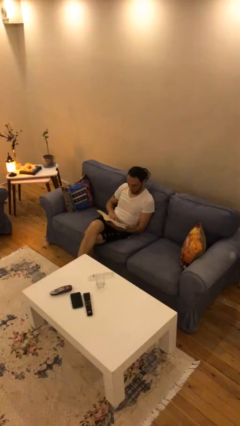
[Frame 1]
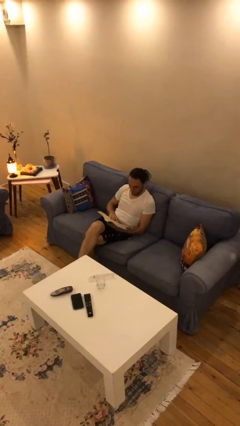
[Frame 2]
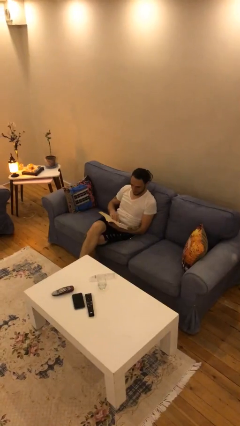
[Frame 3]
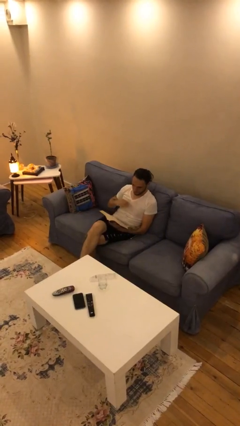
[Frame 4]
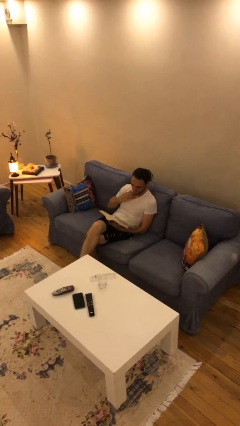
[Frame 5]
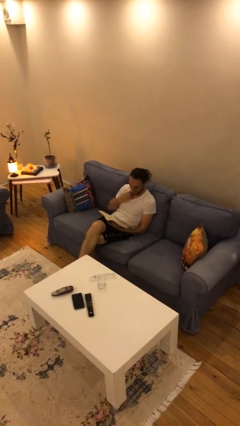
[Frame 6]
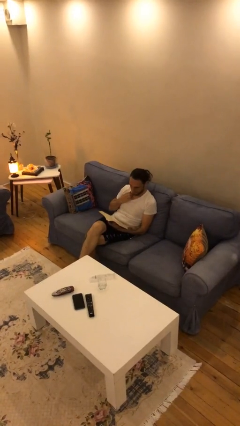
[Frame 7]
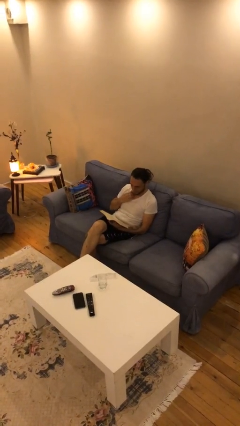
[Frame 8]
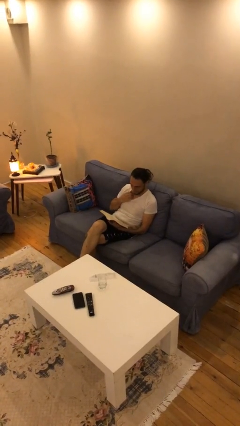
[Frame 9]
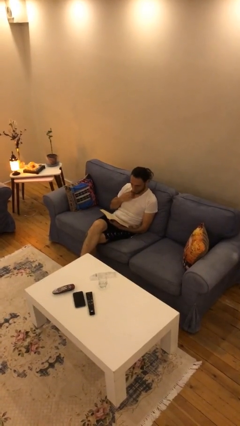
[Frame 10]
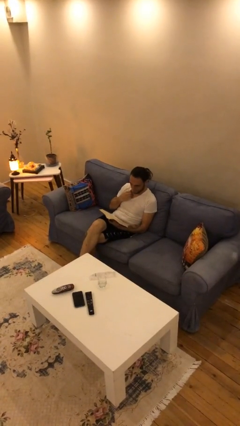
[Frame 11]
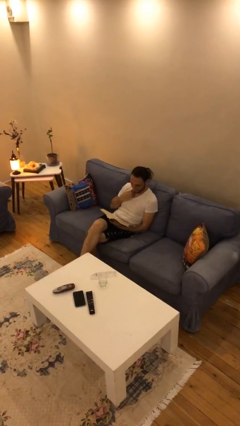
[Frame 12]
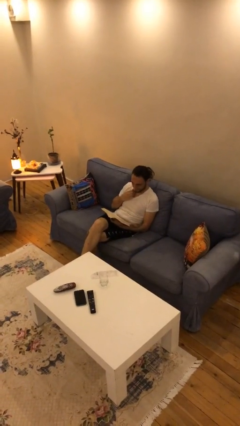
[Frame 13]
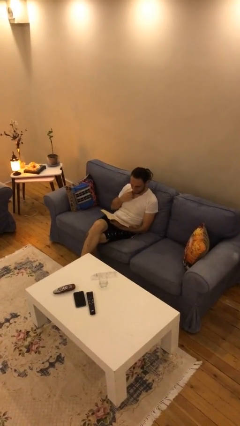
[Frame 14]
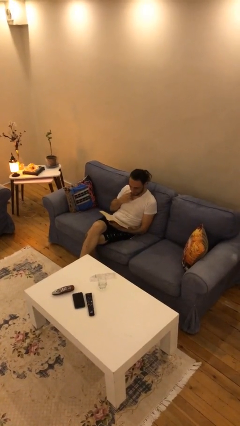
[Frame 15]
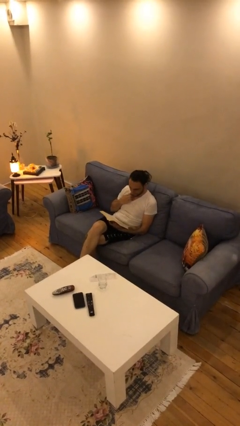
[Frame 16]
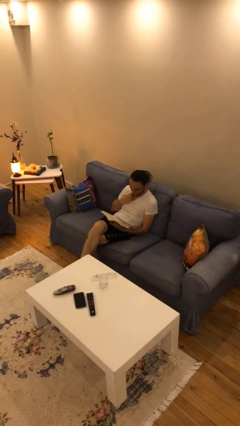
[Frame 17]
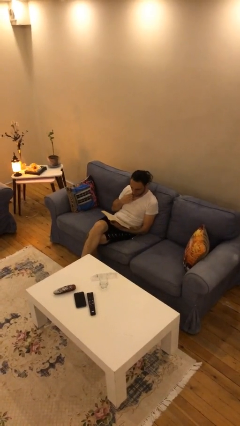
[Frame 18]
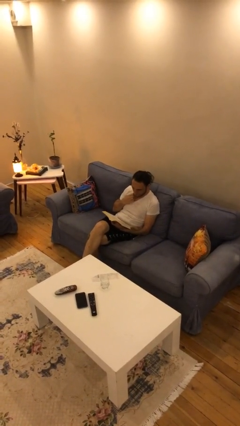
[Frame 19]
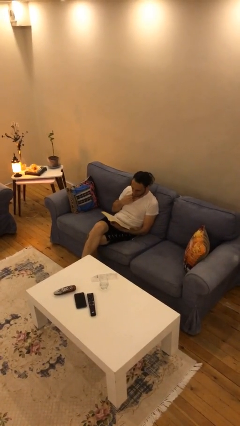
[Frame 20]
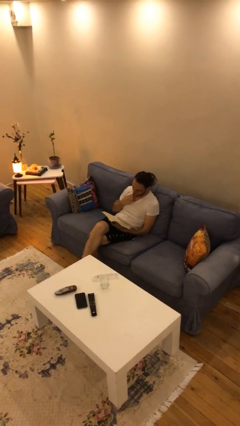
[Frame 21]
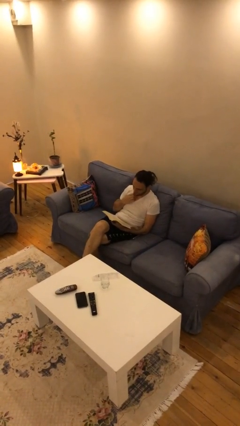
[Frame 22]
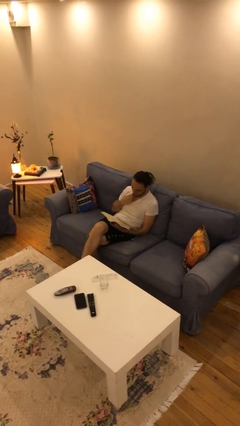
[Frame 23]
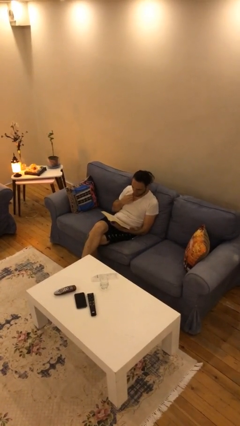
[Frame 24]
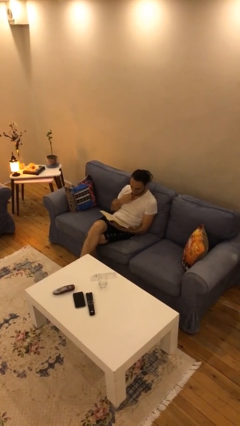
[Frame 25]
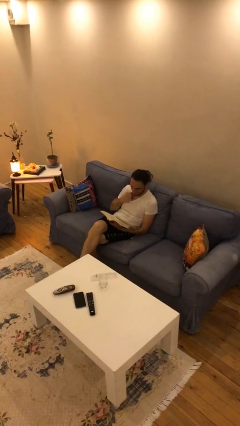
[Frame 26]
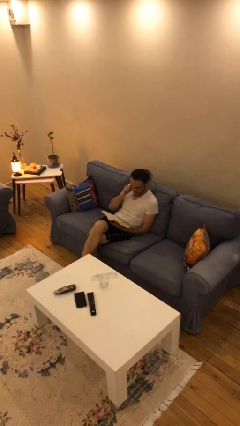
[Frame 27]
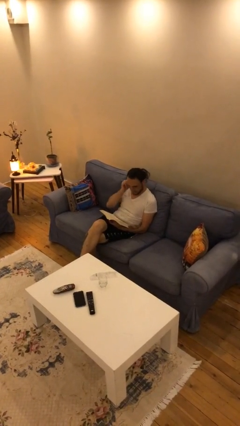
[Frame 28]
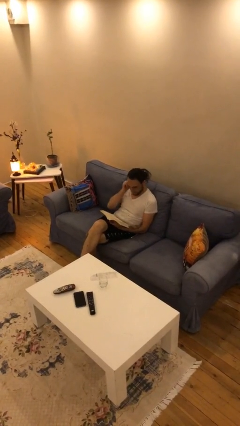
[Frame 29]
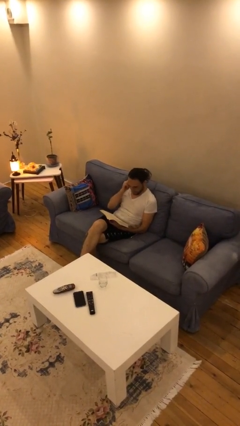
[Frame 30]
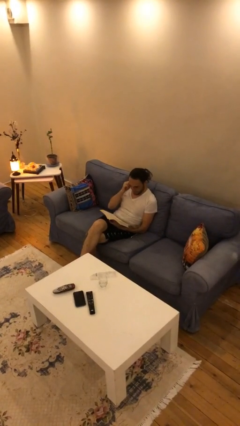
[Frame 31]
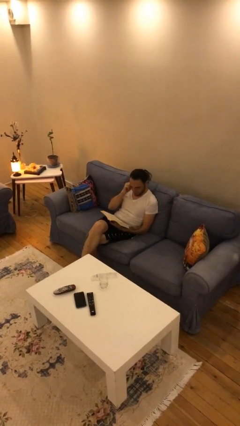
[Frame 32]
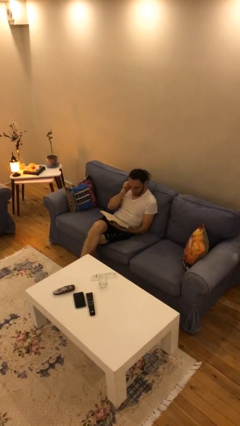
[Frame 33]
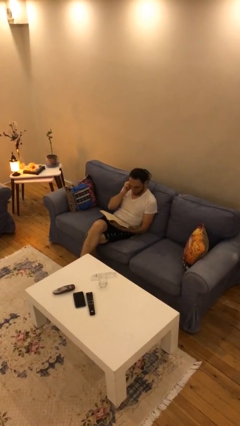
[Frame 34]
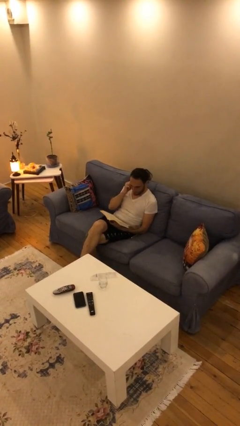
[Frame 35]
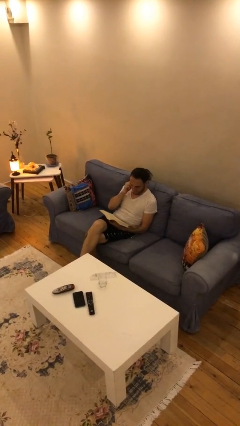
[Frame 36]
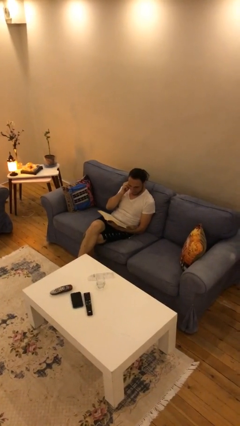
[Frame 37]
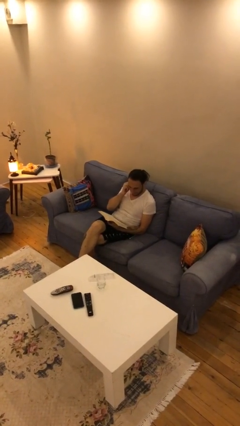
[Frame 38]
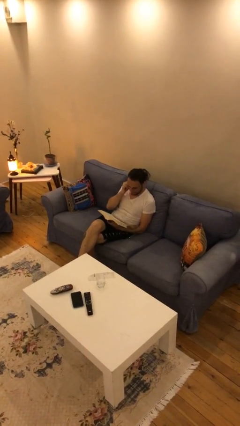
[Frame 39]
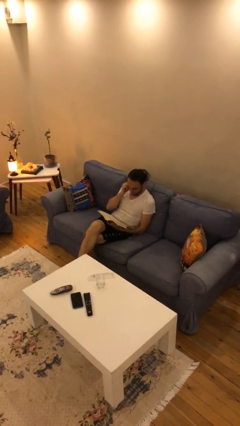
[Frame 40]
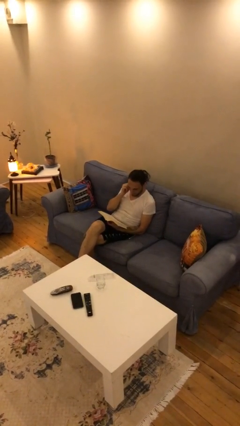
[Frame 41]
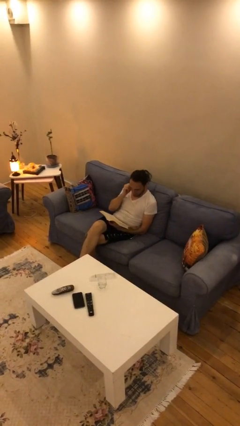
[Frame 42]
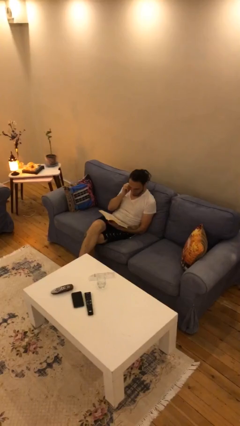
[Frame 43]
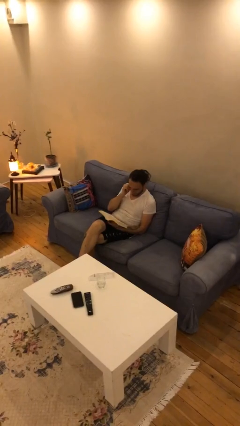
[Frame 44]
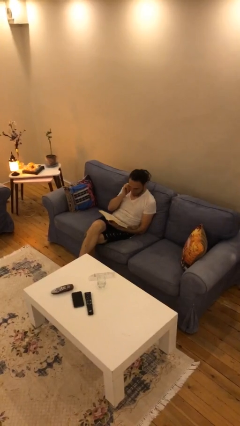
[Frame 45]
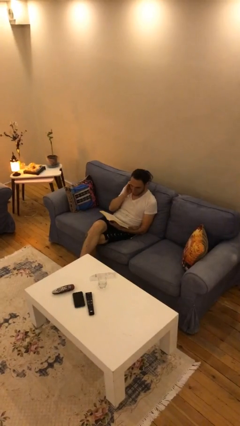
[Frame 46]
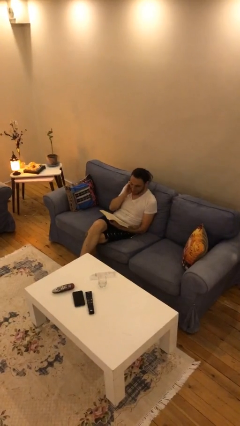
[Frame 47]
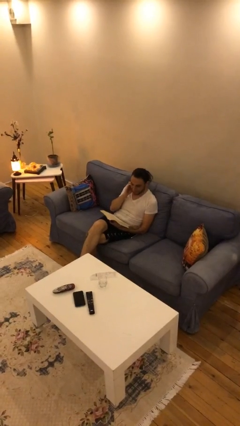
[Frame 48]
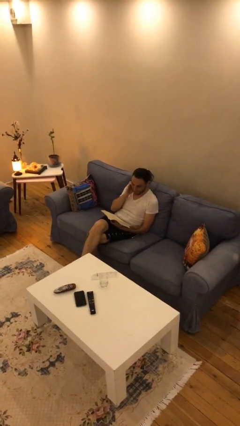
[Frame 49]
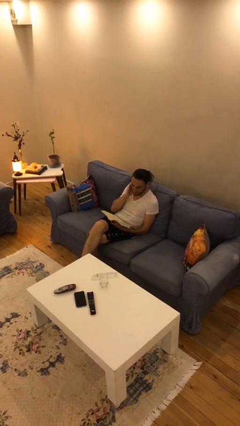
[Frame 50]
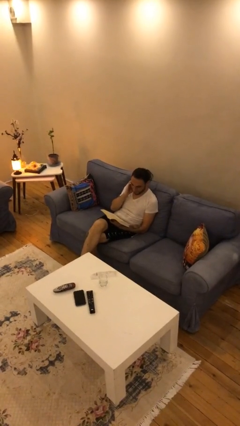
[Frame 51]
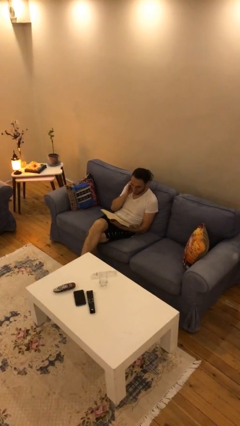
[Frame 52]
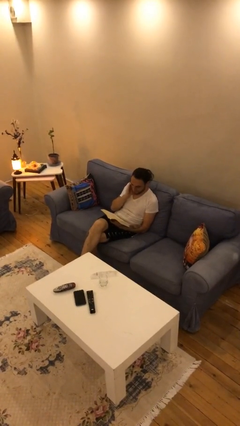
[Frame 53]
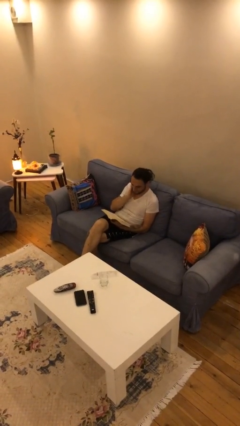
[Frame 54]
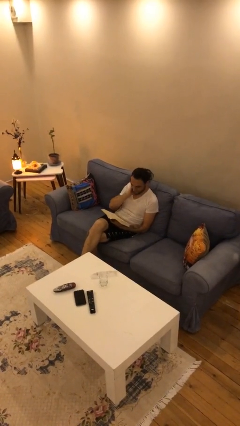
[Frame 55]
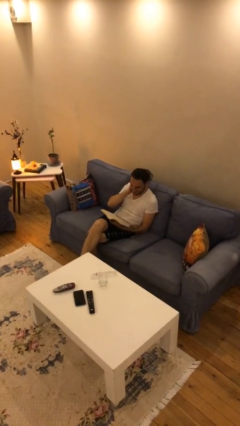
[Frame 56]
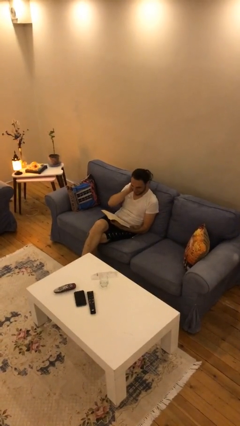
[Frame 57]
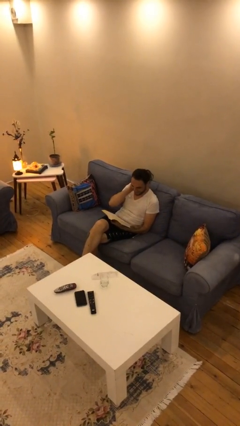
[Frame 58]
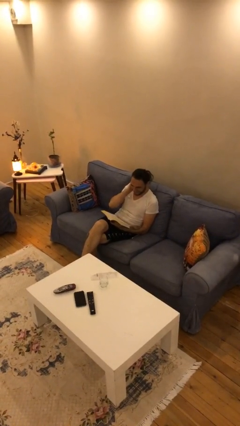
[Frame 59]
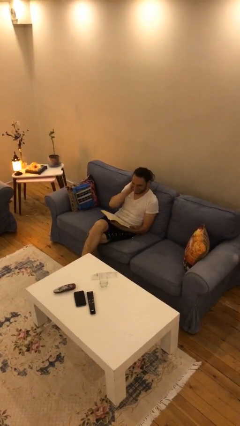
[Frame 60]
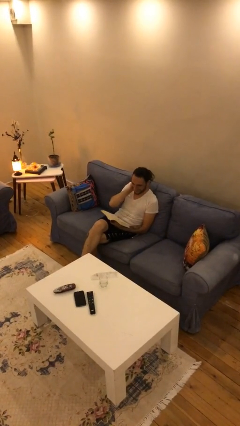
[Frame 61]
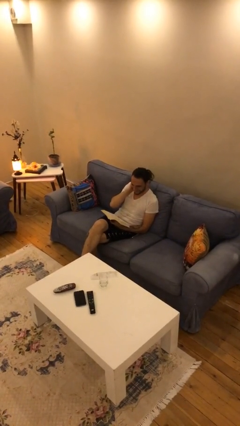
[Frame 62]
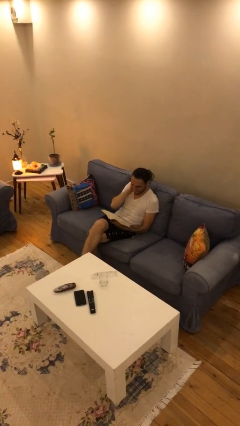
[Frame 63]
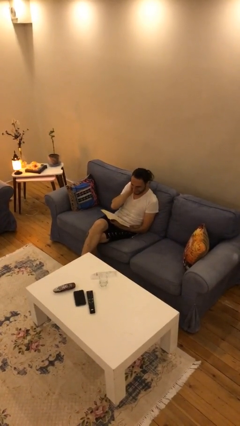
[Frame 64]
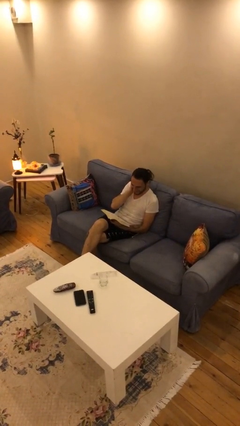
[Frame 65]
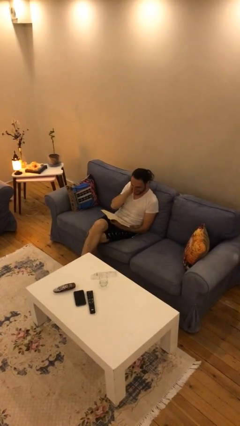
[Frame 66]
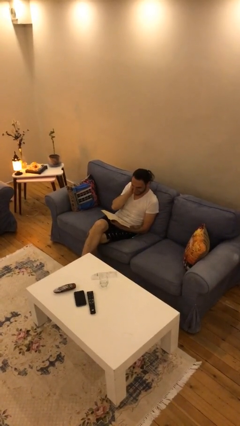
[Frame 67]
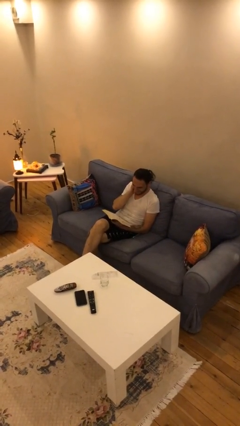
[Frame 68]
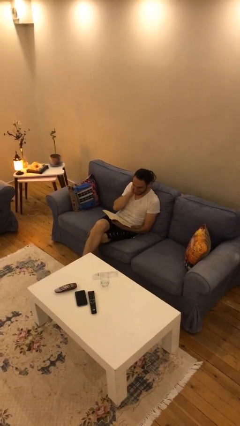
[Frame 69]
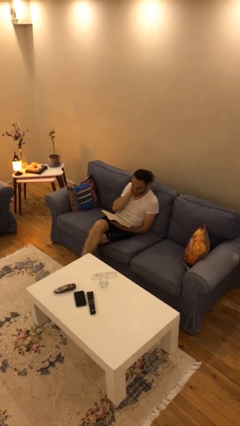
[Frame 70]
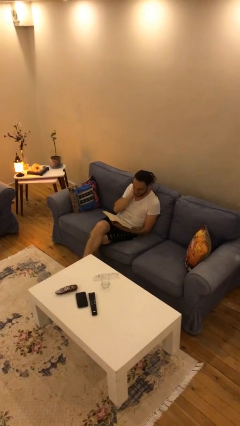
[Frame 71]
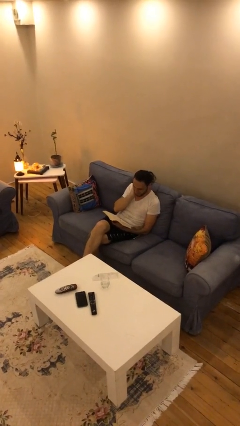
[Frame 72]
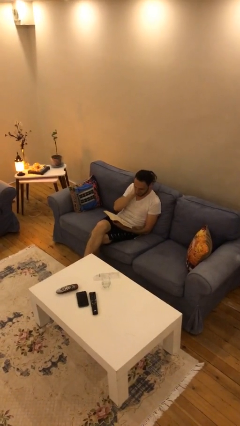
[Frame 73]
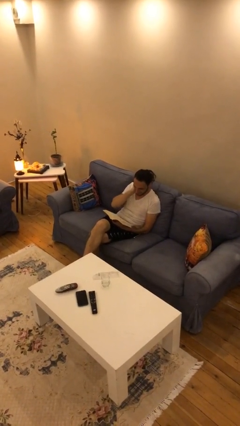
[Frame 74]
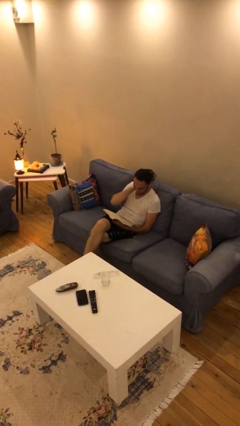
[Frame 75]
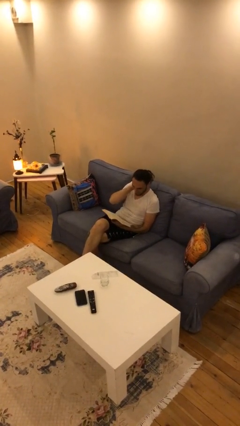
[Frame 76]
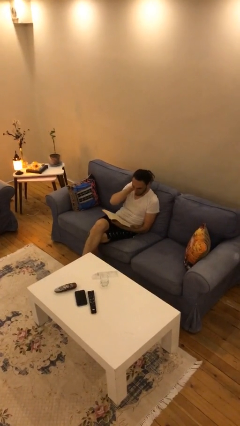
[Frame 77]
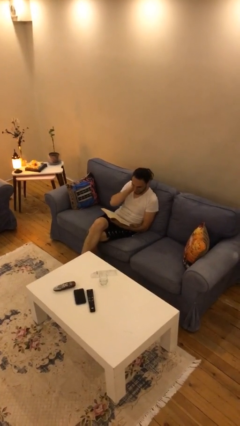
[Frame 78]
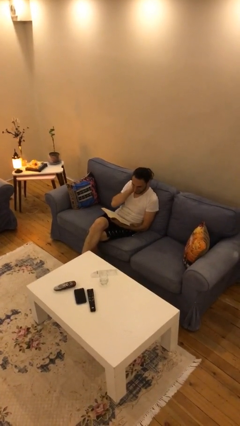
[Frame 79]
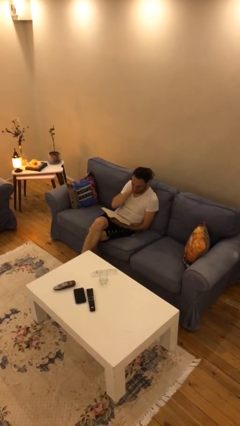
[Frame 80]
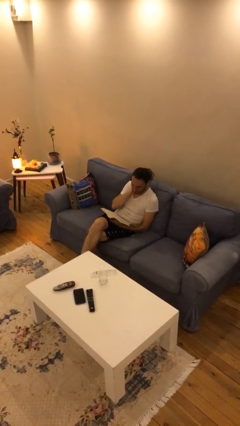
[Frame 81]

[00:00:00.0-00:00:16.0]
person reads document

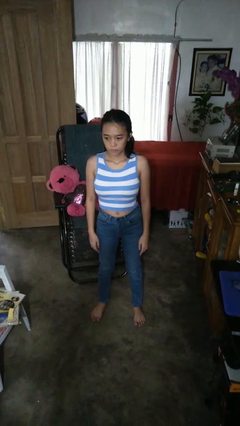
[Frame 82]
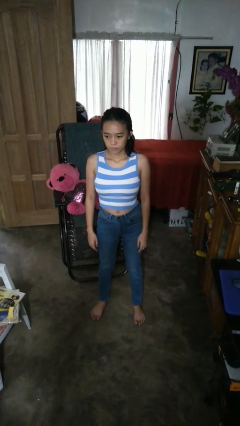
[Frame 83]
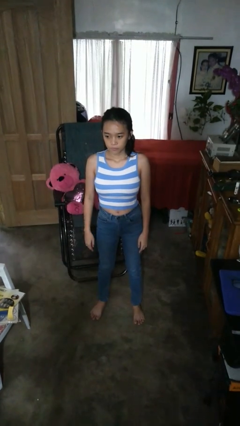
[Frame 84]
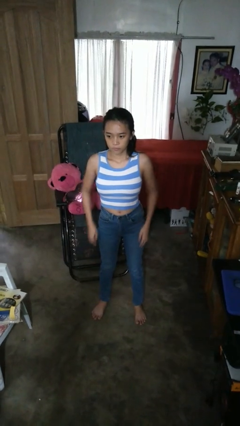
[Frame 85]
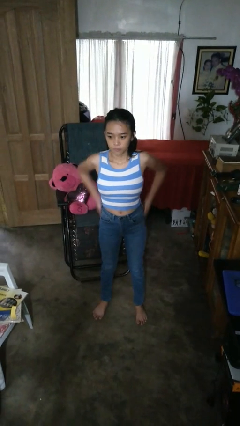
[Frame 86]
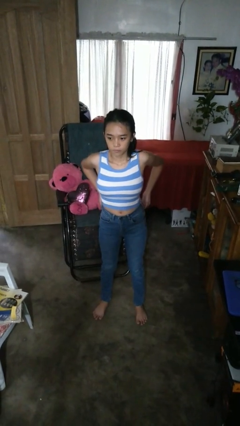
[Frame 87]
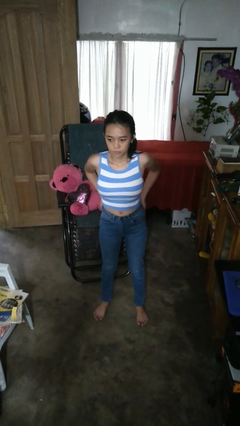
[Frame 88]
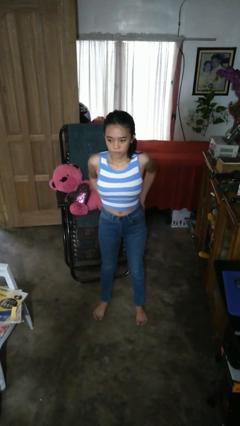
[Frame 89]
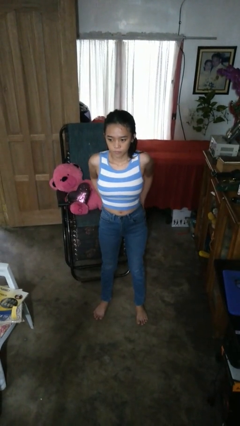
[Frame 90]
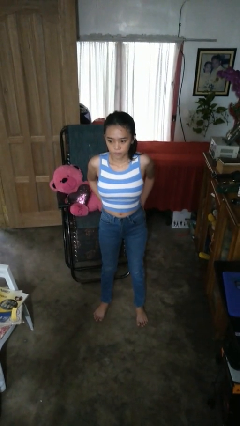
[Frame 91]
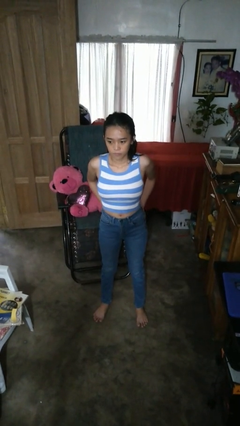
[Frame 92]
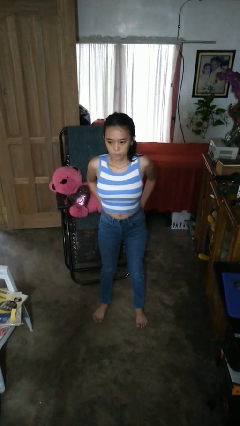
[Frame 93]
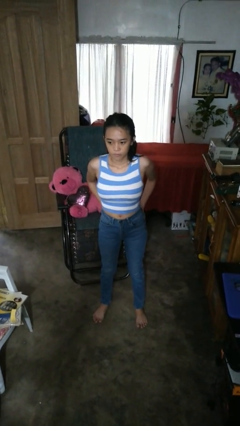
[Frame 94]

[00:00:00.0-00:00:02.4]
person puts hands in back pockets
